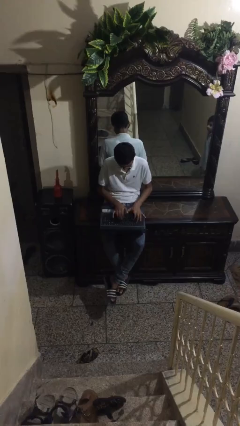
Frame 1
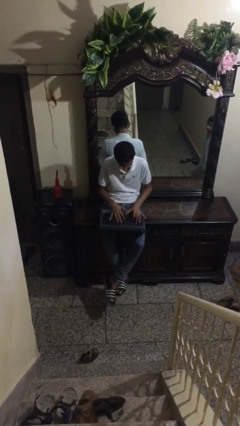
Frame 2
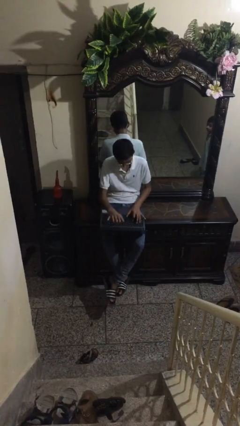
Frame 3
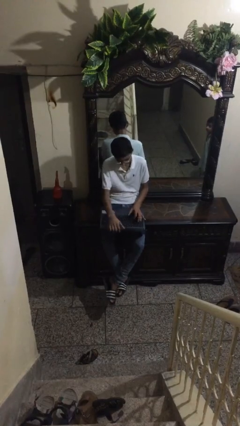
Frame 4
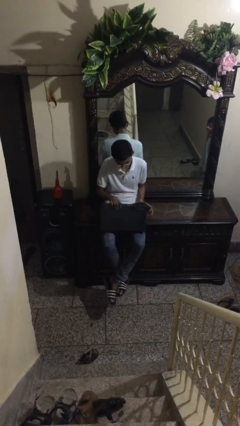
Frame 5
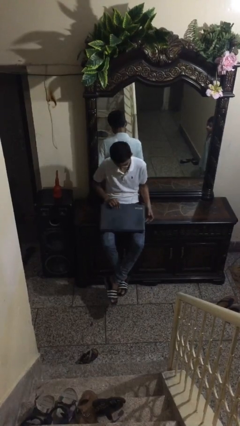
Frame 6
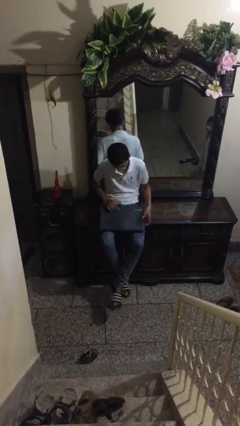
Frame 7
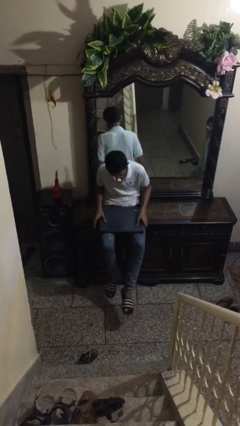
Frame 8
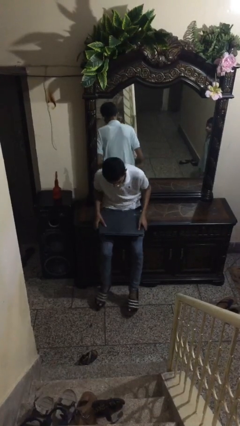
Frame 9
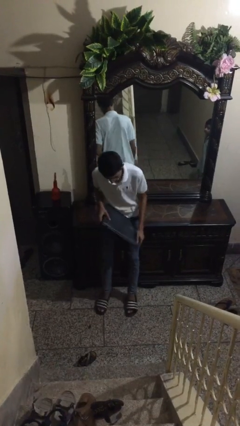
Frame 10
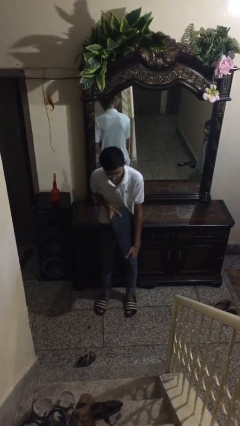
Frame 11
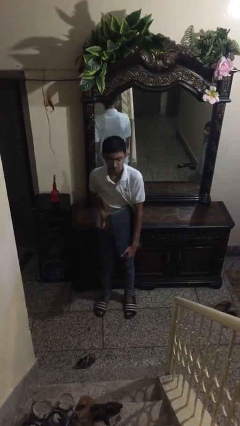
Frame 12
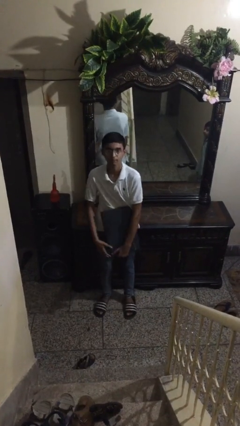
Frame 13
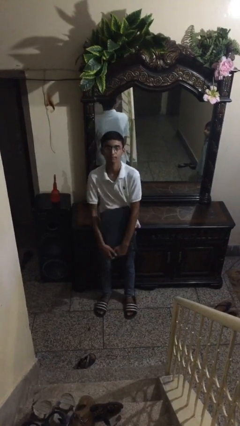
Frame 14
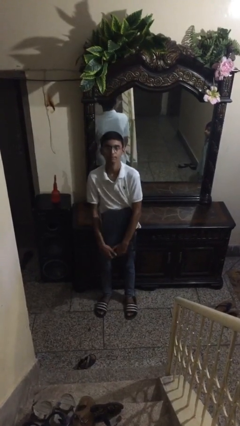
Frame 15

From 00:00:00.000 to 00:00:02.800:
person stands up

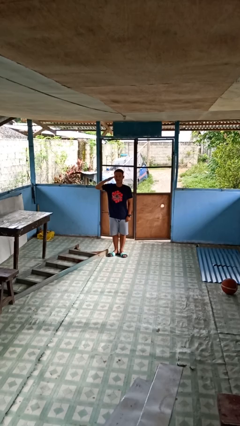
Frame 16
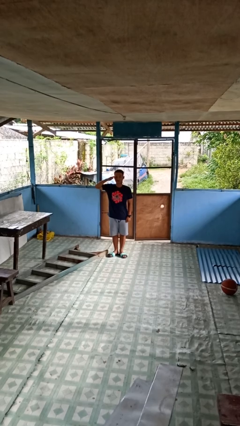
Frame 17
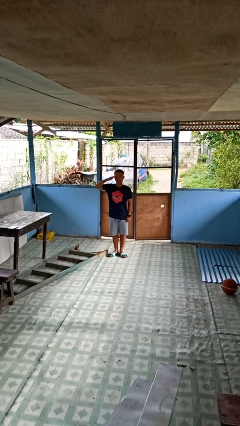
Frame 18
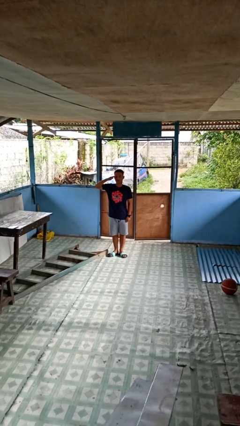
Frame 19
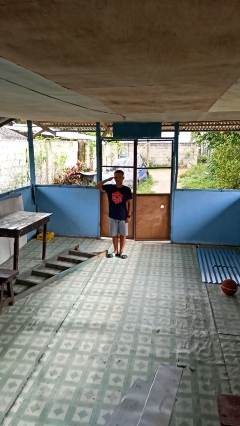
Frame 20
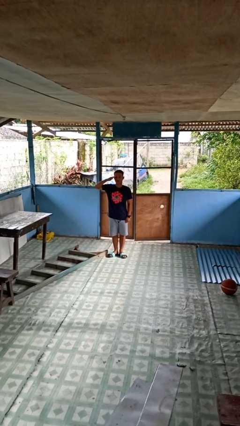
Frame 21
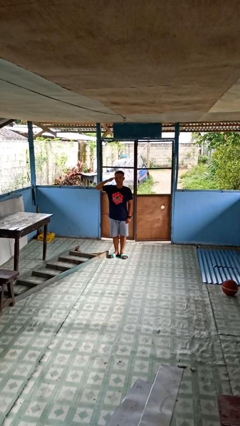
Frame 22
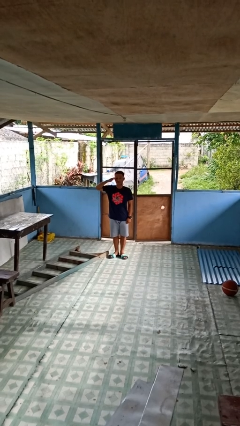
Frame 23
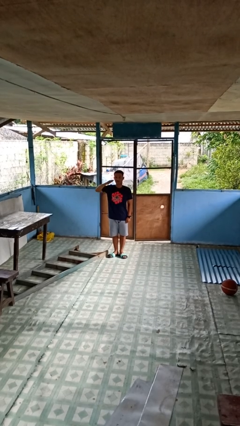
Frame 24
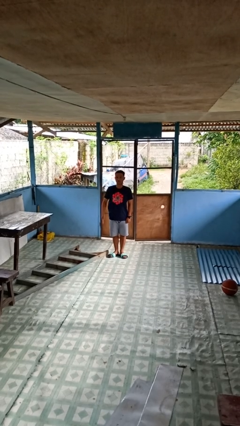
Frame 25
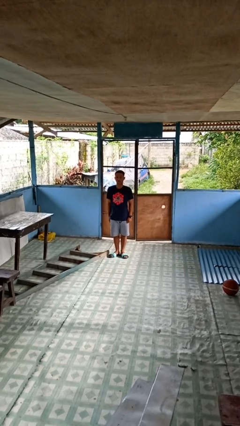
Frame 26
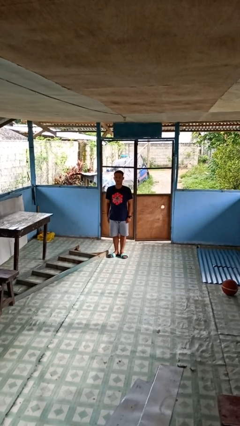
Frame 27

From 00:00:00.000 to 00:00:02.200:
person salutes

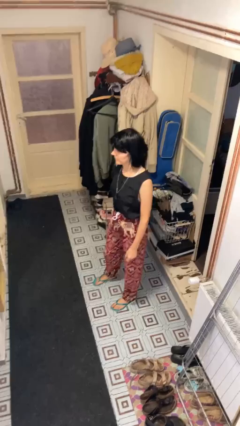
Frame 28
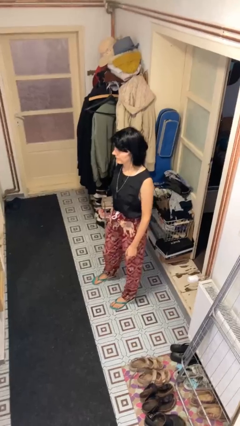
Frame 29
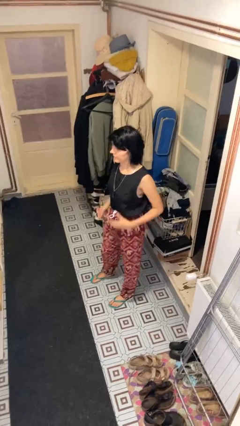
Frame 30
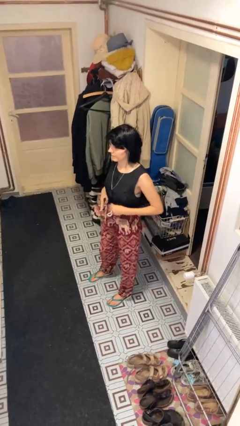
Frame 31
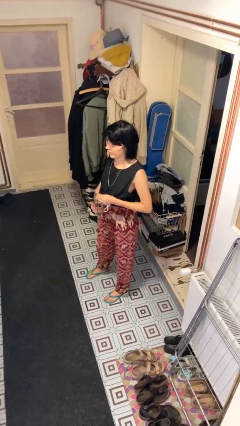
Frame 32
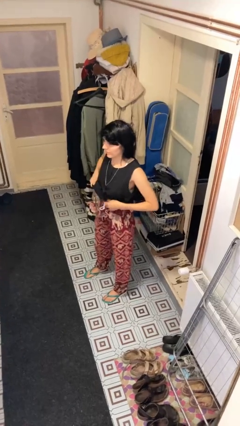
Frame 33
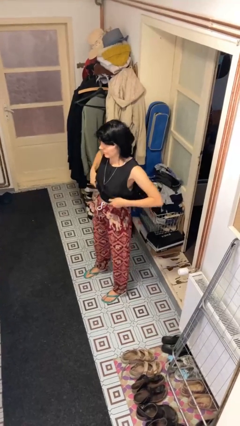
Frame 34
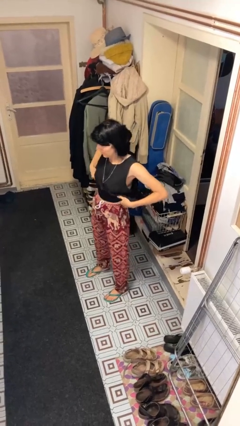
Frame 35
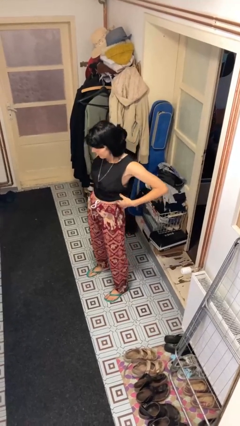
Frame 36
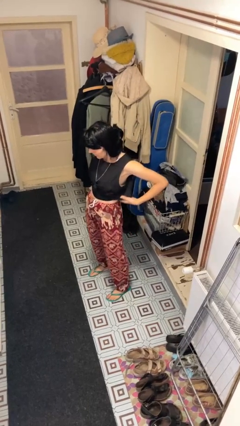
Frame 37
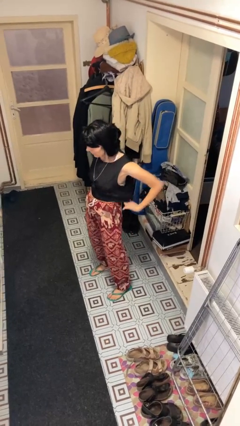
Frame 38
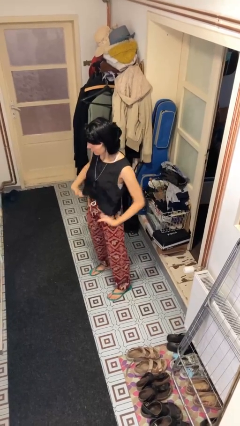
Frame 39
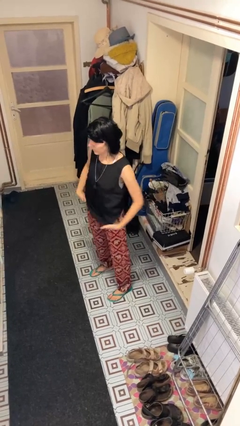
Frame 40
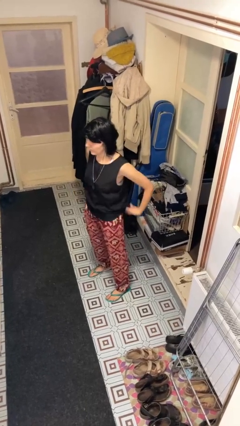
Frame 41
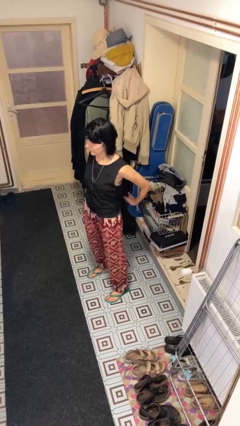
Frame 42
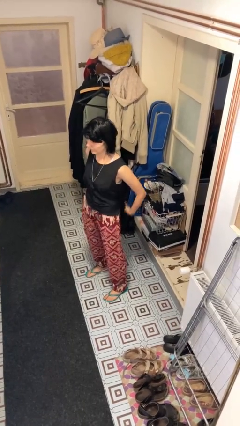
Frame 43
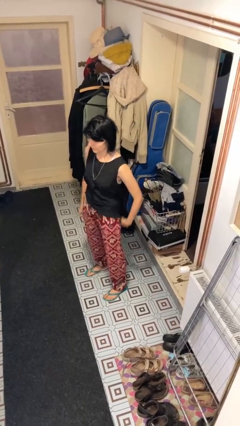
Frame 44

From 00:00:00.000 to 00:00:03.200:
person untucks shirt

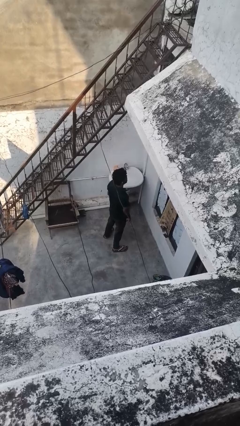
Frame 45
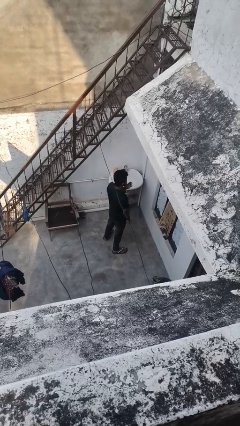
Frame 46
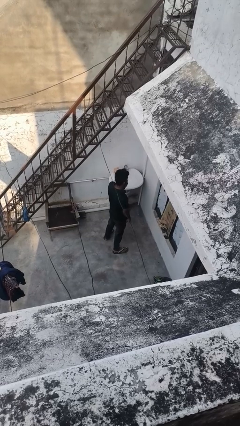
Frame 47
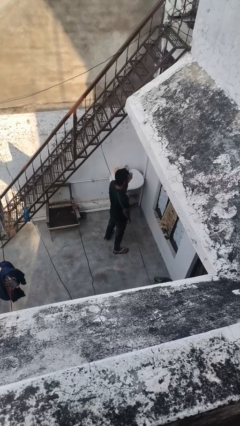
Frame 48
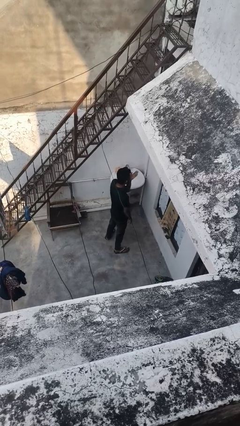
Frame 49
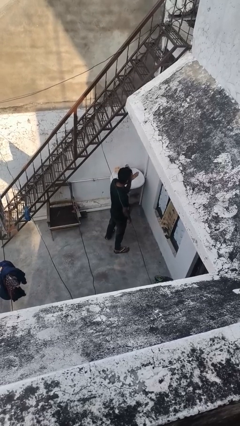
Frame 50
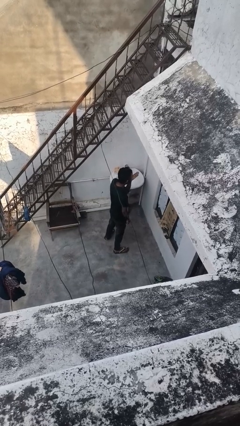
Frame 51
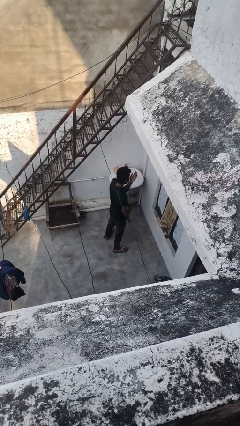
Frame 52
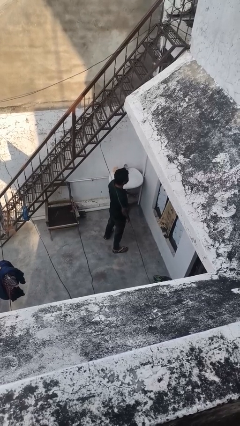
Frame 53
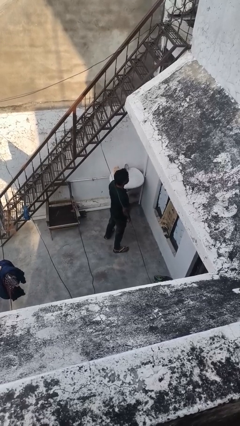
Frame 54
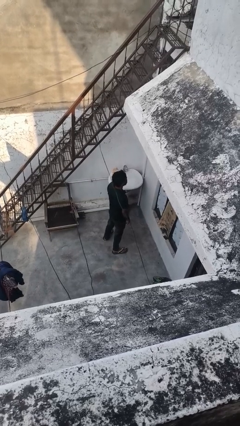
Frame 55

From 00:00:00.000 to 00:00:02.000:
person gestures blow kiss

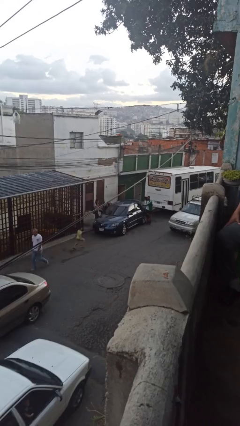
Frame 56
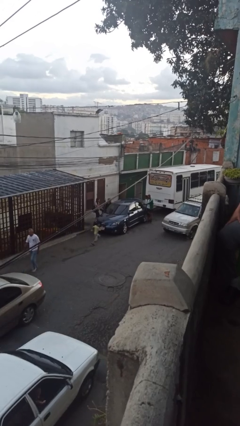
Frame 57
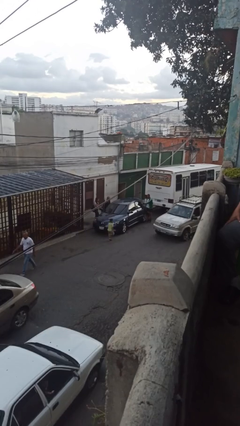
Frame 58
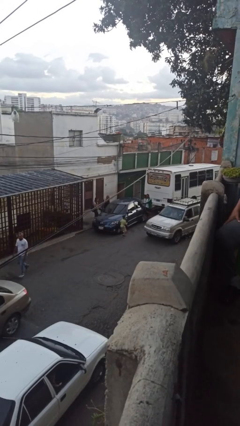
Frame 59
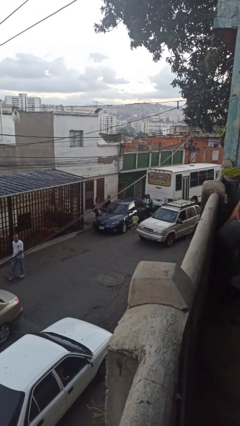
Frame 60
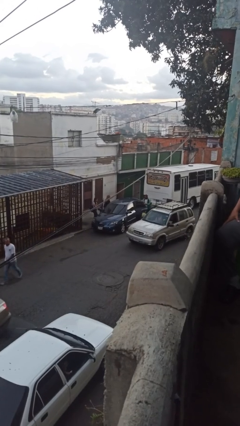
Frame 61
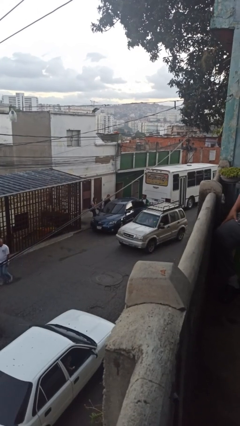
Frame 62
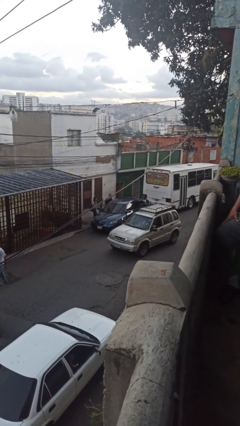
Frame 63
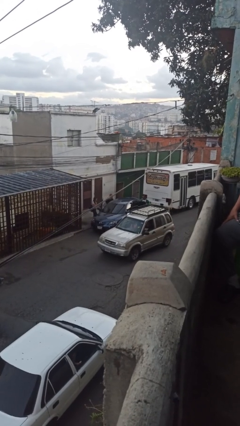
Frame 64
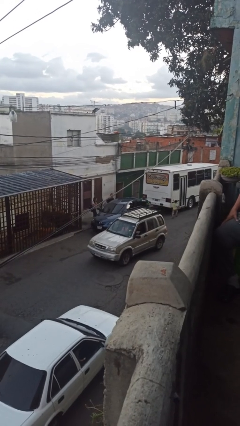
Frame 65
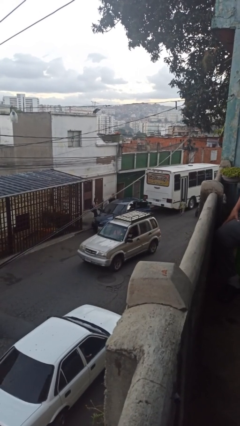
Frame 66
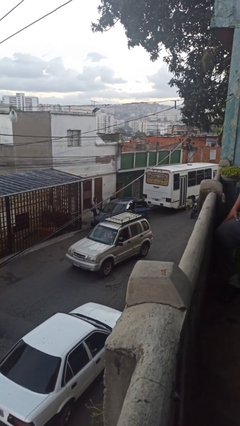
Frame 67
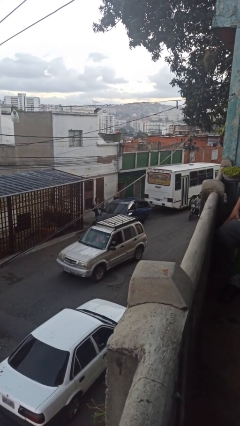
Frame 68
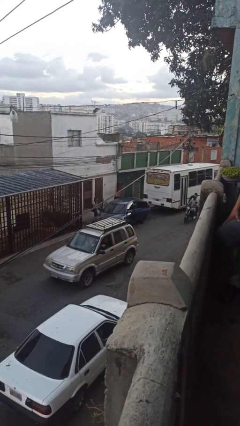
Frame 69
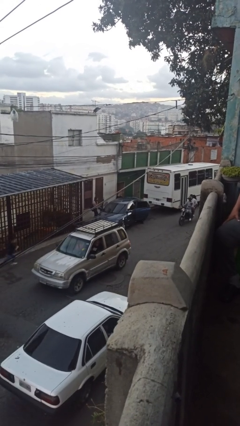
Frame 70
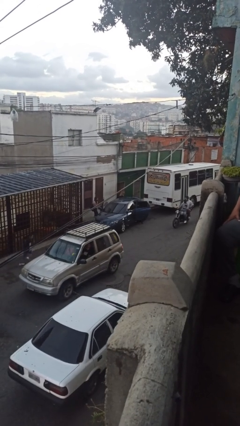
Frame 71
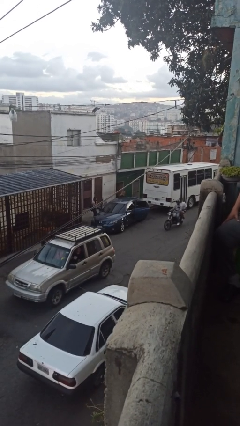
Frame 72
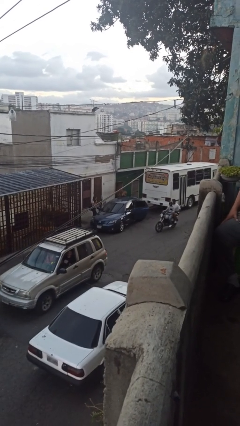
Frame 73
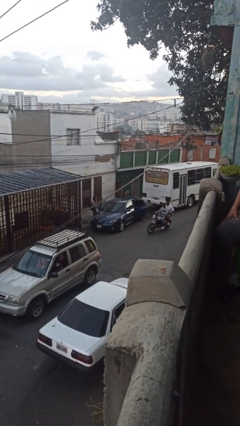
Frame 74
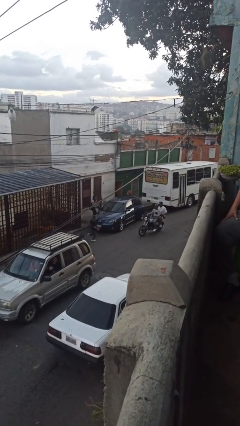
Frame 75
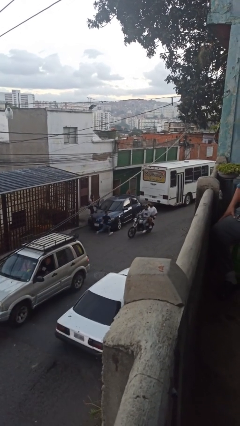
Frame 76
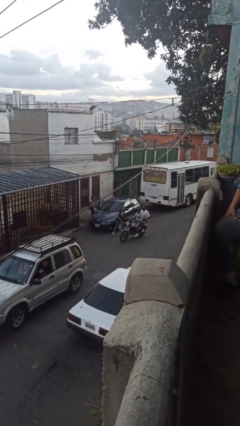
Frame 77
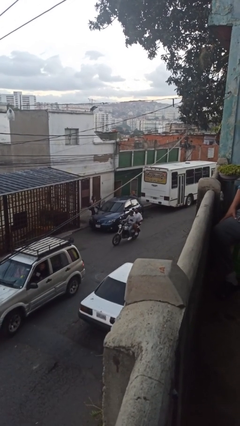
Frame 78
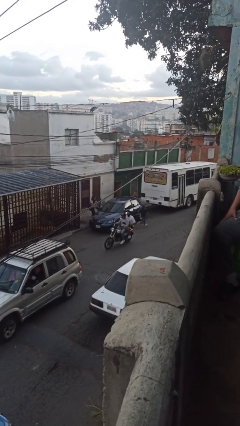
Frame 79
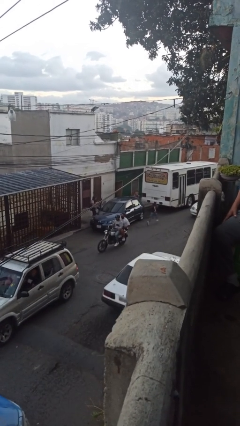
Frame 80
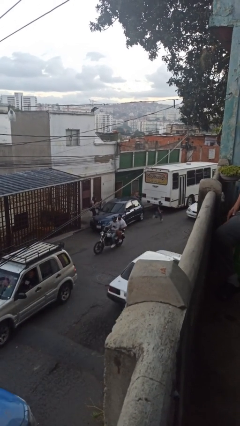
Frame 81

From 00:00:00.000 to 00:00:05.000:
car picks up person

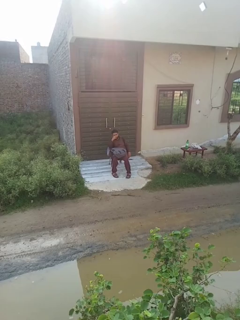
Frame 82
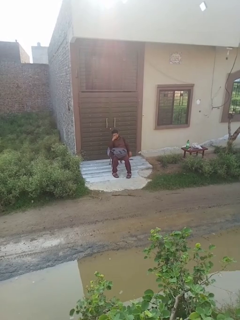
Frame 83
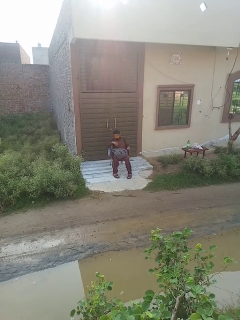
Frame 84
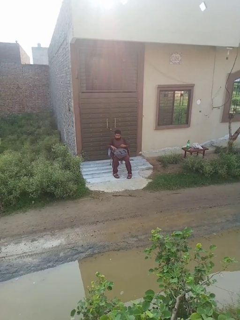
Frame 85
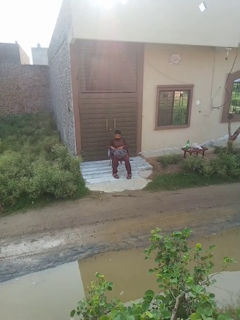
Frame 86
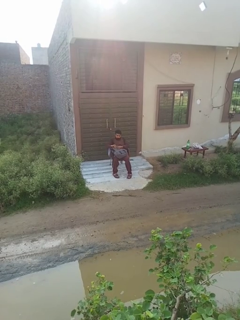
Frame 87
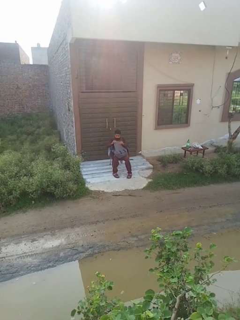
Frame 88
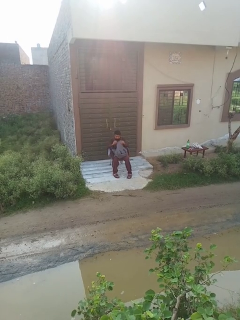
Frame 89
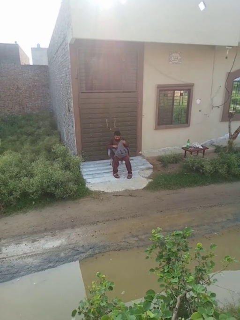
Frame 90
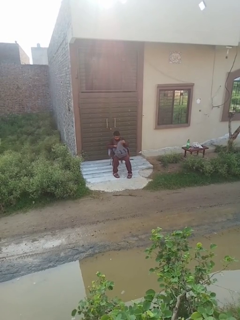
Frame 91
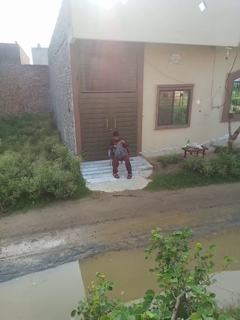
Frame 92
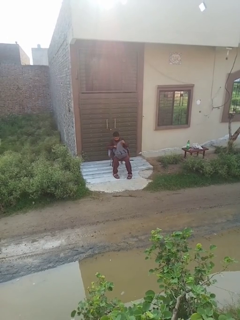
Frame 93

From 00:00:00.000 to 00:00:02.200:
person searches in backpack

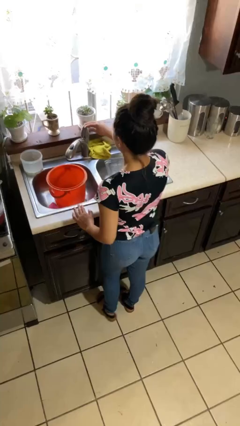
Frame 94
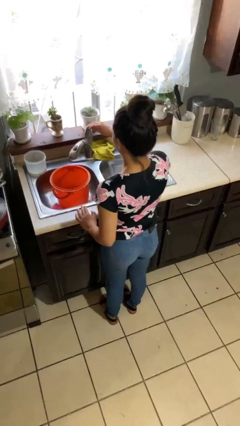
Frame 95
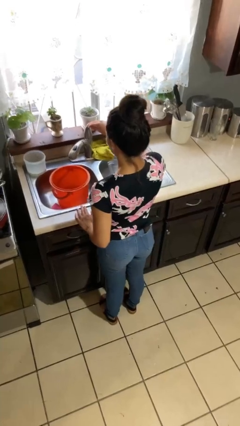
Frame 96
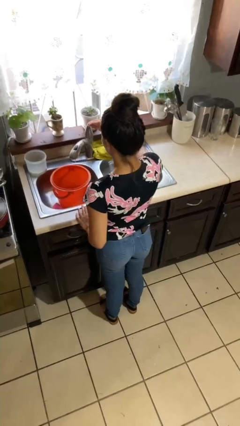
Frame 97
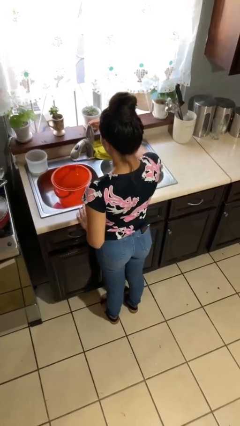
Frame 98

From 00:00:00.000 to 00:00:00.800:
person turns on faucet
